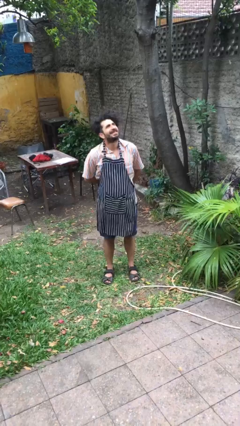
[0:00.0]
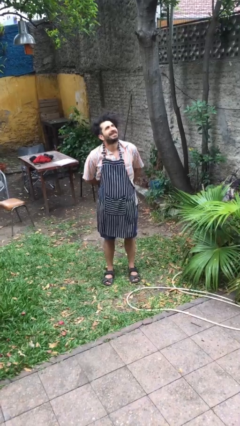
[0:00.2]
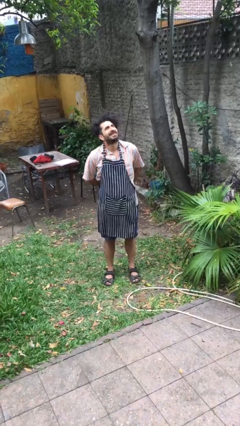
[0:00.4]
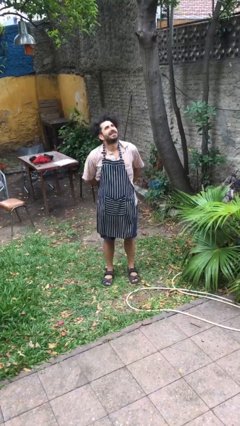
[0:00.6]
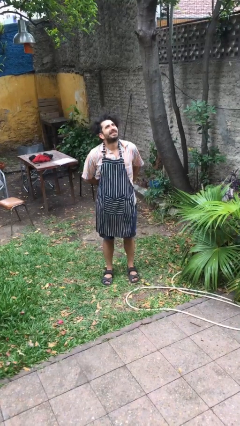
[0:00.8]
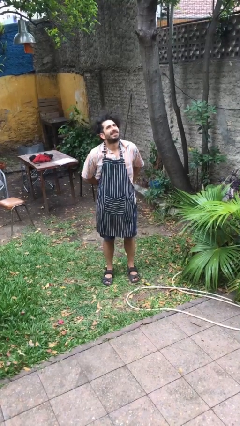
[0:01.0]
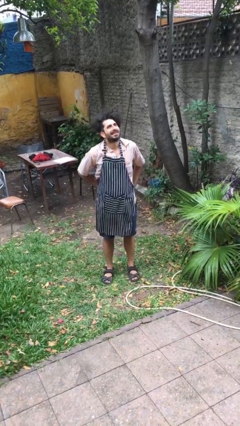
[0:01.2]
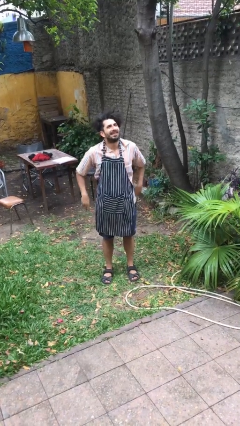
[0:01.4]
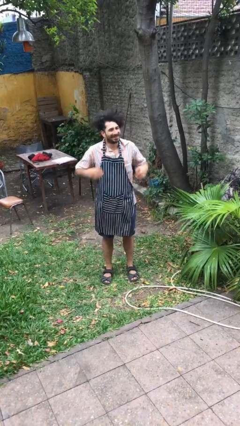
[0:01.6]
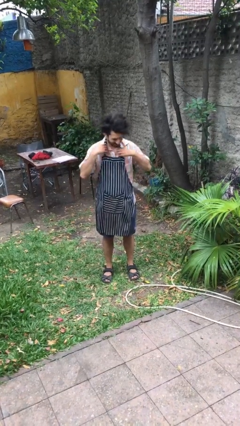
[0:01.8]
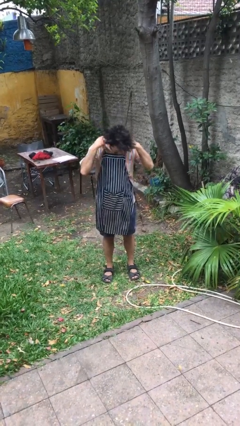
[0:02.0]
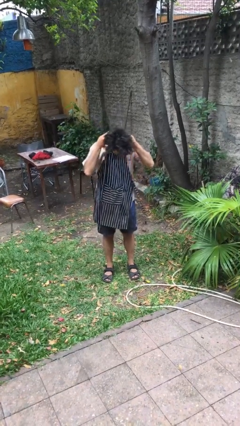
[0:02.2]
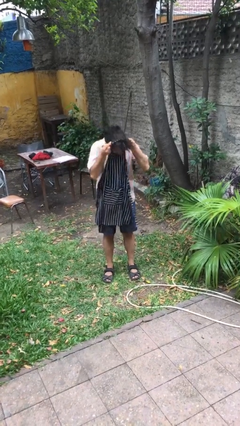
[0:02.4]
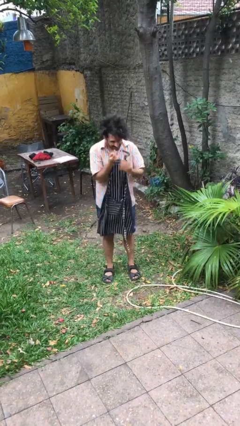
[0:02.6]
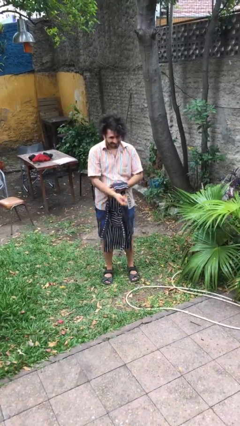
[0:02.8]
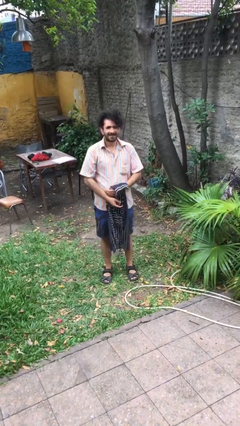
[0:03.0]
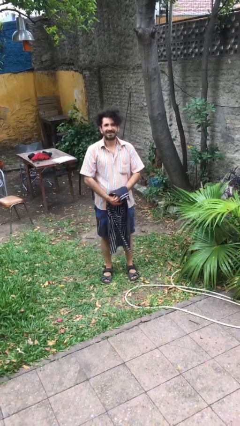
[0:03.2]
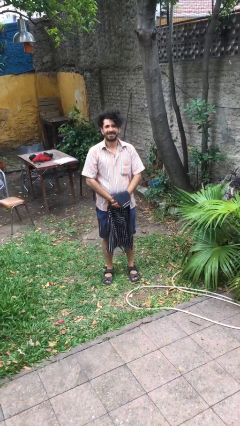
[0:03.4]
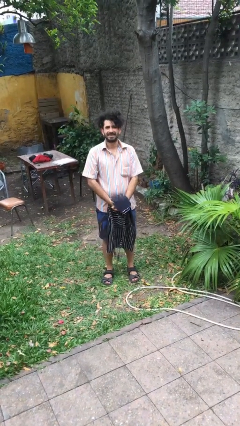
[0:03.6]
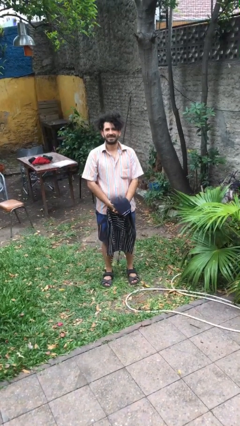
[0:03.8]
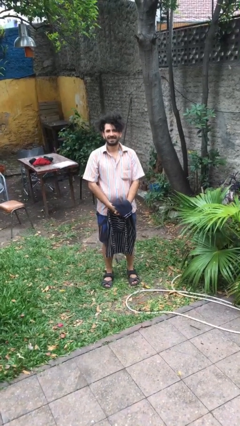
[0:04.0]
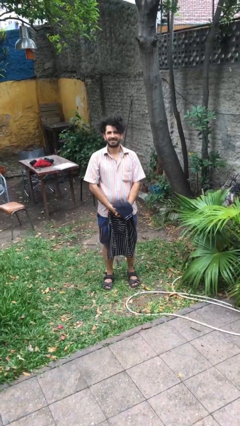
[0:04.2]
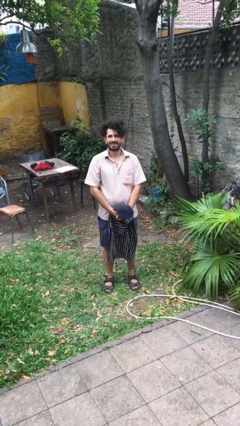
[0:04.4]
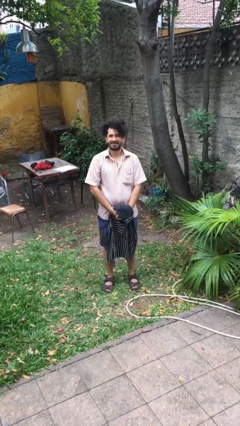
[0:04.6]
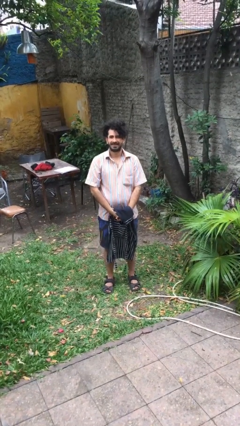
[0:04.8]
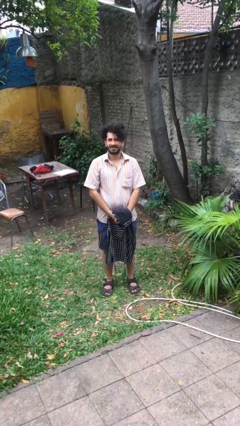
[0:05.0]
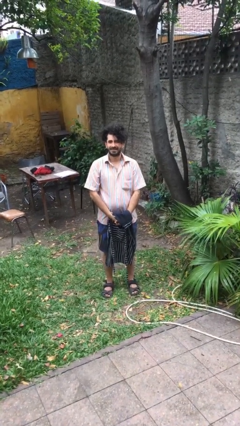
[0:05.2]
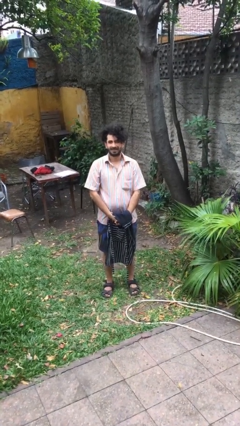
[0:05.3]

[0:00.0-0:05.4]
person takes off apron

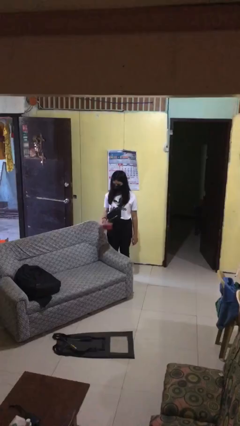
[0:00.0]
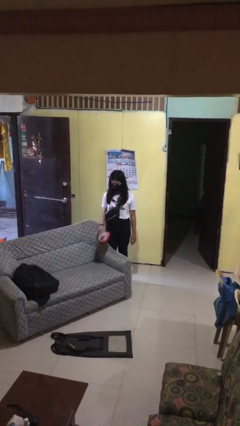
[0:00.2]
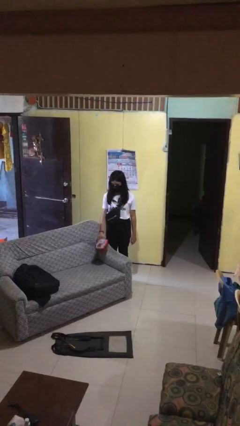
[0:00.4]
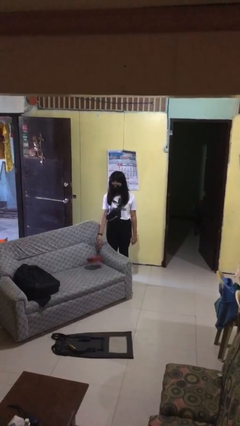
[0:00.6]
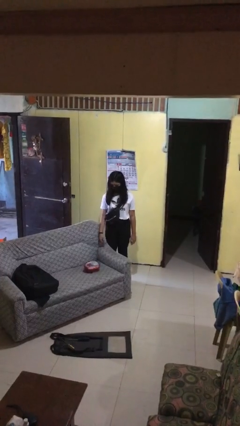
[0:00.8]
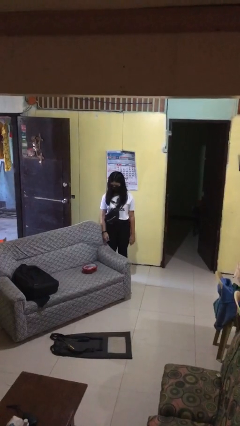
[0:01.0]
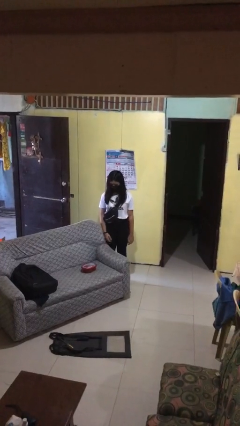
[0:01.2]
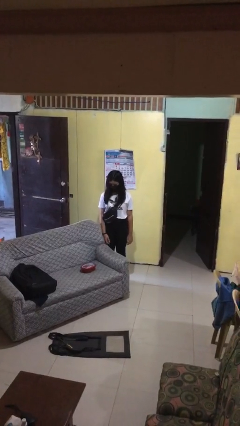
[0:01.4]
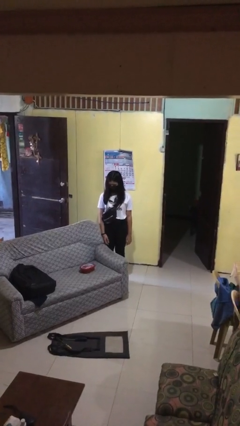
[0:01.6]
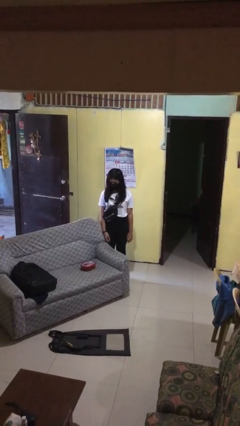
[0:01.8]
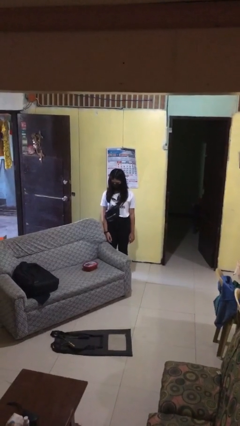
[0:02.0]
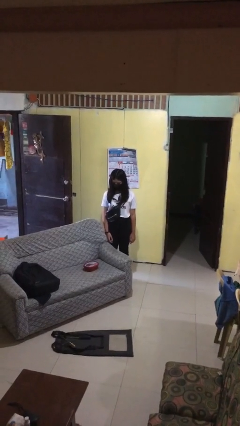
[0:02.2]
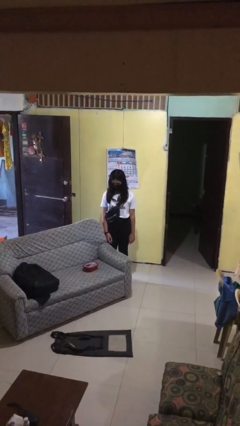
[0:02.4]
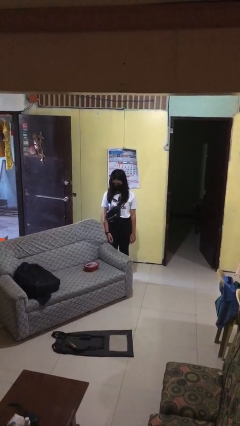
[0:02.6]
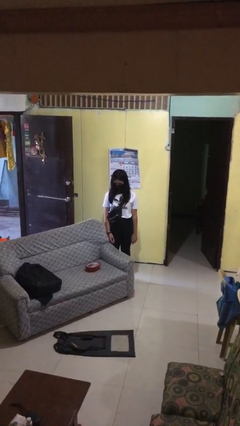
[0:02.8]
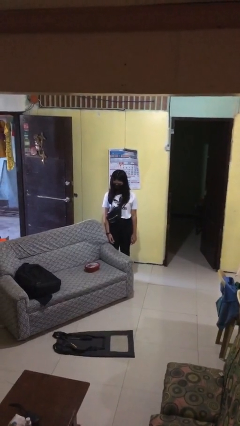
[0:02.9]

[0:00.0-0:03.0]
person puts down object on couch

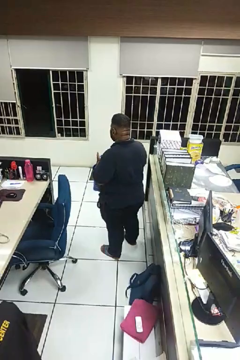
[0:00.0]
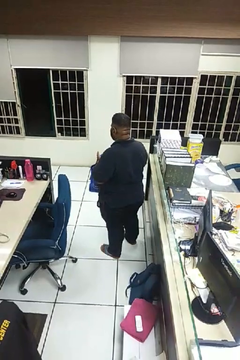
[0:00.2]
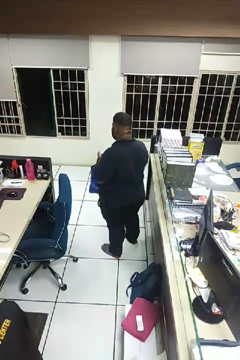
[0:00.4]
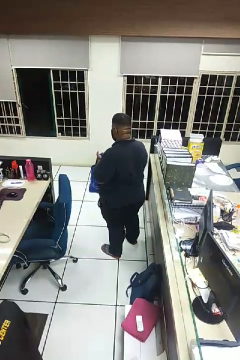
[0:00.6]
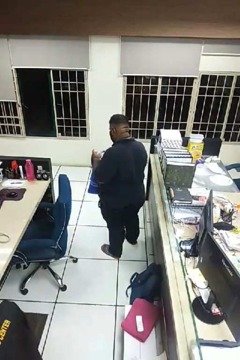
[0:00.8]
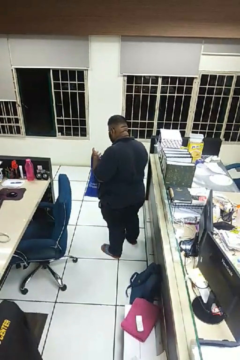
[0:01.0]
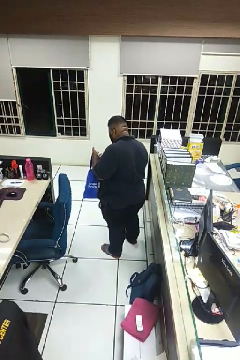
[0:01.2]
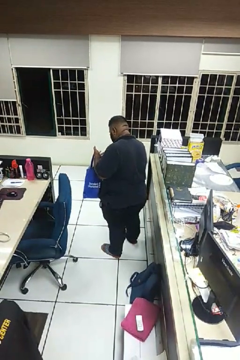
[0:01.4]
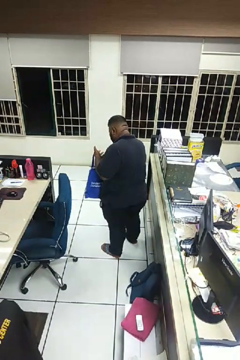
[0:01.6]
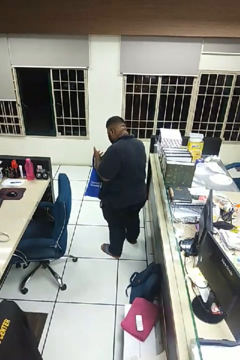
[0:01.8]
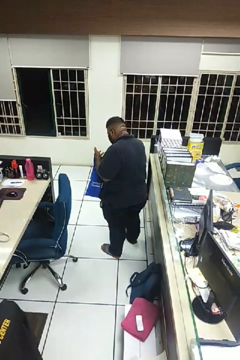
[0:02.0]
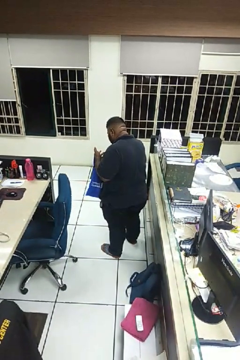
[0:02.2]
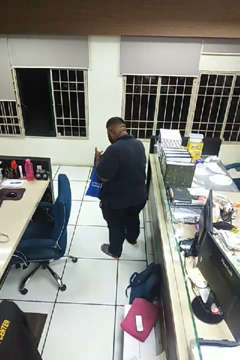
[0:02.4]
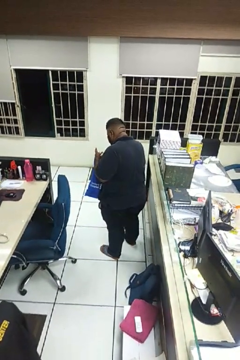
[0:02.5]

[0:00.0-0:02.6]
person searches in bag

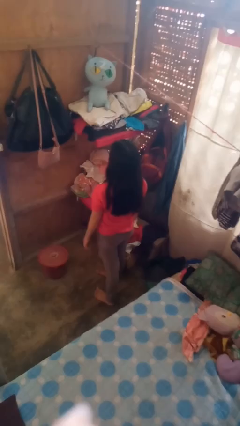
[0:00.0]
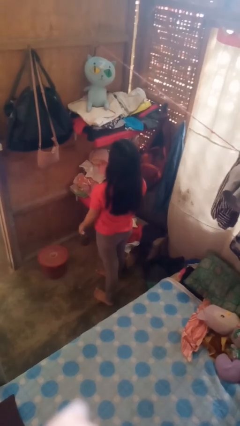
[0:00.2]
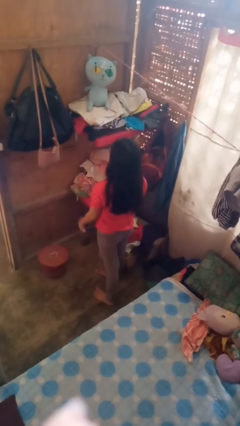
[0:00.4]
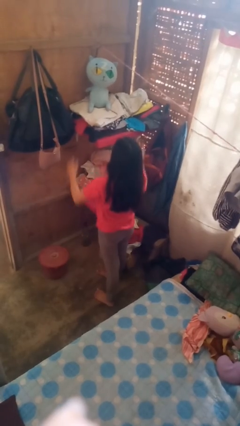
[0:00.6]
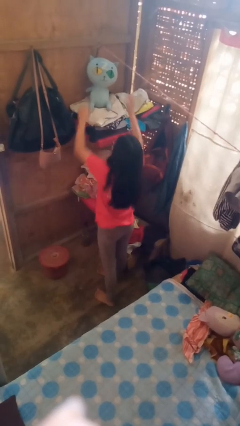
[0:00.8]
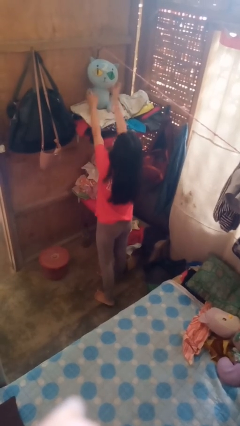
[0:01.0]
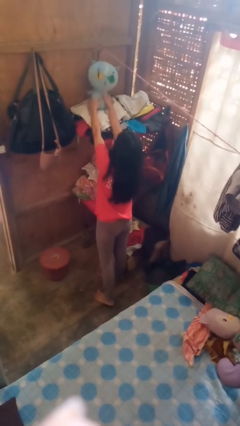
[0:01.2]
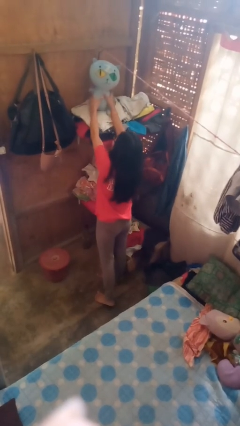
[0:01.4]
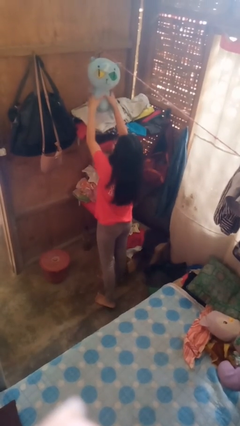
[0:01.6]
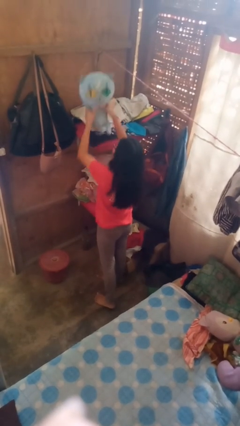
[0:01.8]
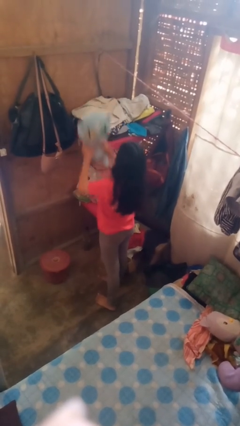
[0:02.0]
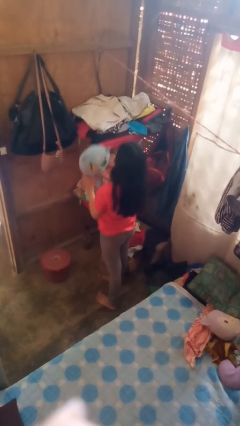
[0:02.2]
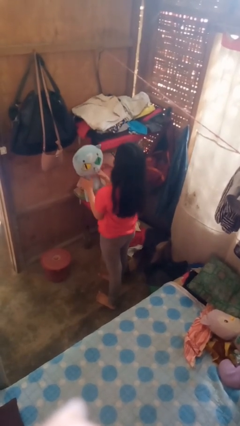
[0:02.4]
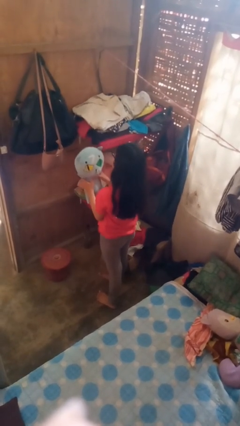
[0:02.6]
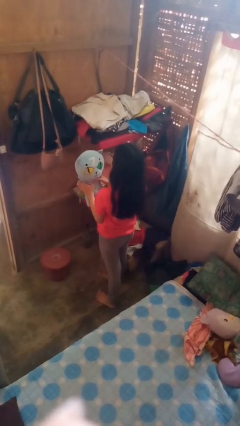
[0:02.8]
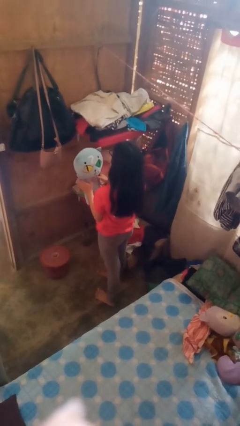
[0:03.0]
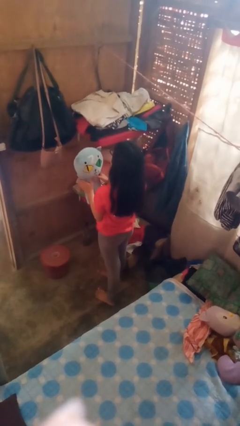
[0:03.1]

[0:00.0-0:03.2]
person picks up object from shelf

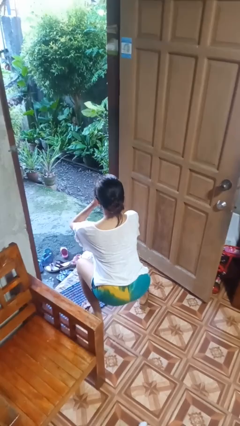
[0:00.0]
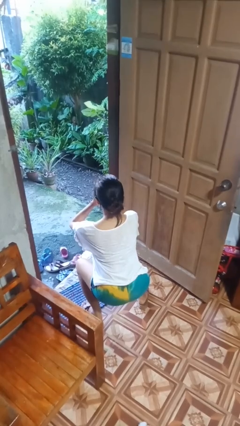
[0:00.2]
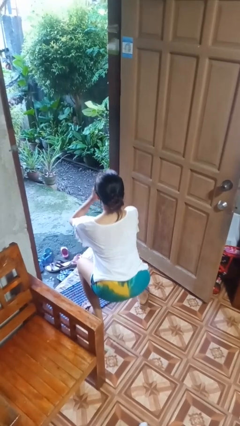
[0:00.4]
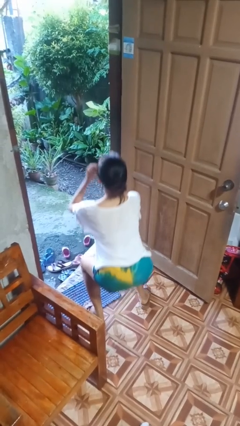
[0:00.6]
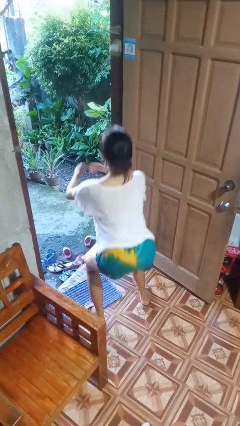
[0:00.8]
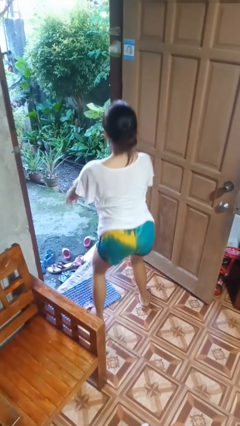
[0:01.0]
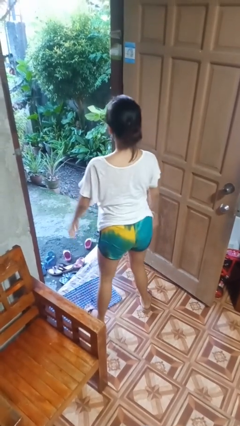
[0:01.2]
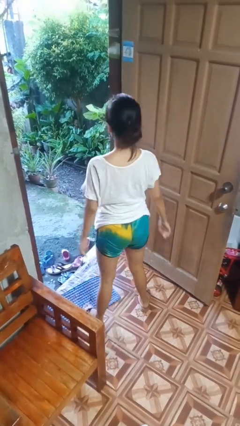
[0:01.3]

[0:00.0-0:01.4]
person stands up

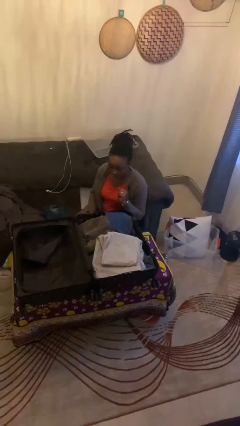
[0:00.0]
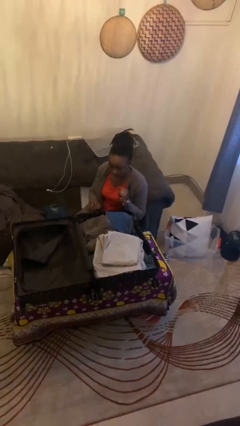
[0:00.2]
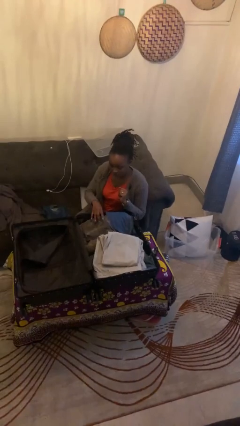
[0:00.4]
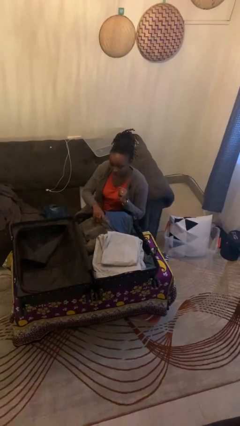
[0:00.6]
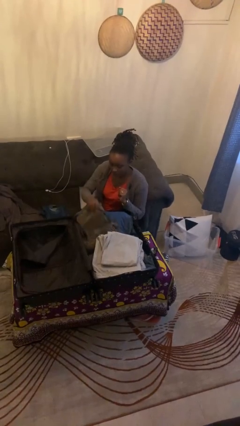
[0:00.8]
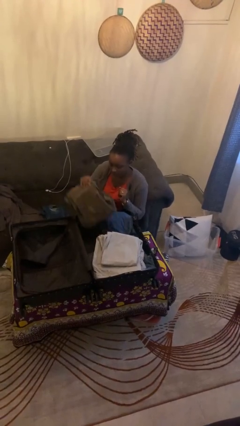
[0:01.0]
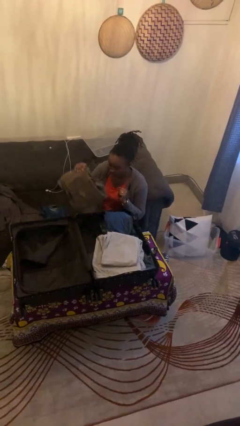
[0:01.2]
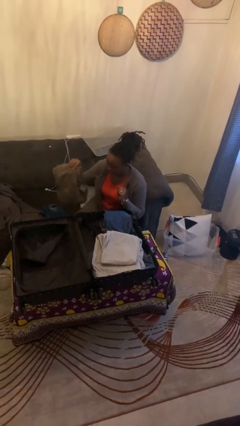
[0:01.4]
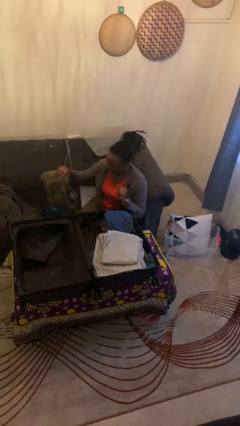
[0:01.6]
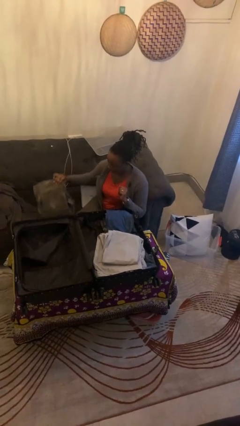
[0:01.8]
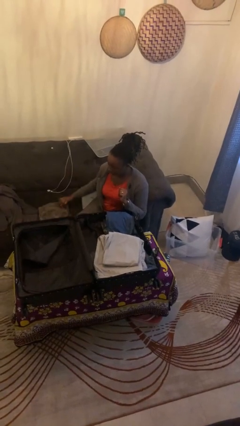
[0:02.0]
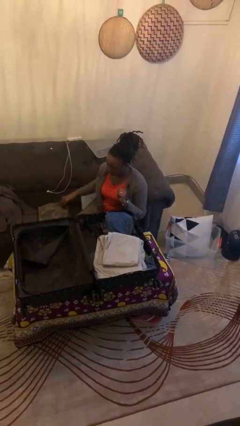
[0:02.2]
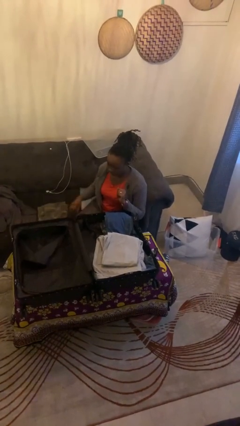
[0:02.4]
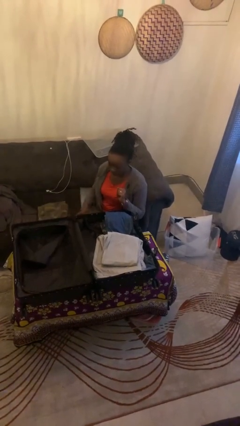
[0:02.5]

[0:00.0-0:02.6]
person unloads clothes from suitcase
